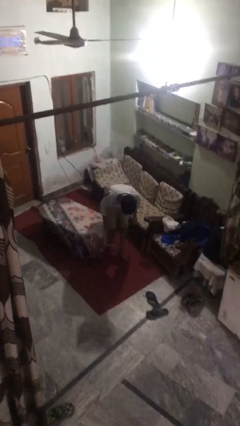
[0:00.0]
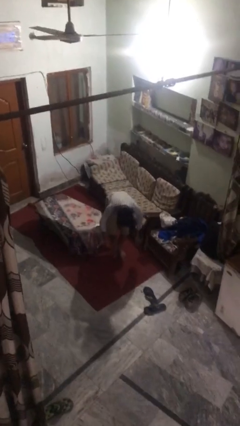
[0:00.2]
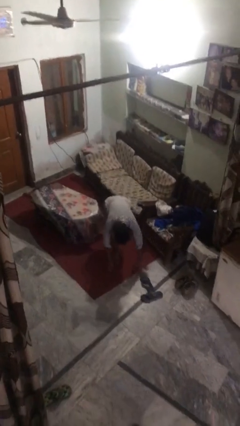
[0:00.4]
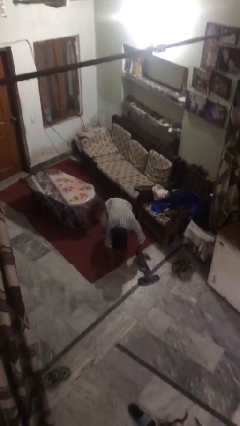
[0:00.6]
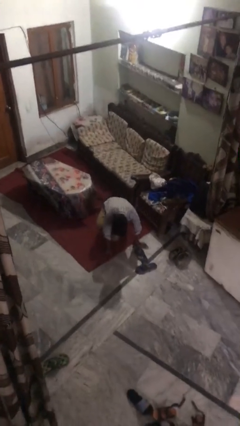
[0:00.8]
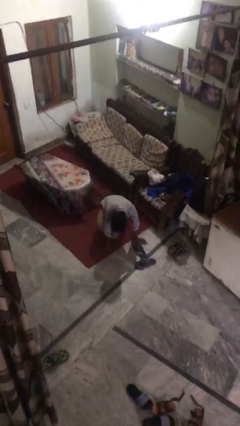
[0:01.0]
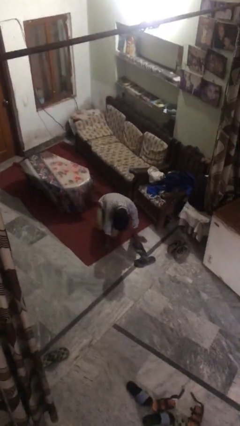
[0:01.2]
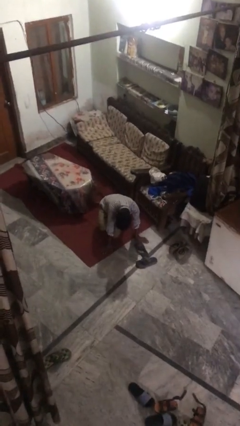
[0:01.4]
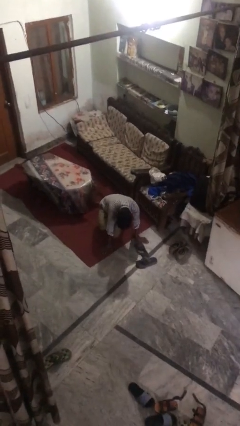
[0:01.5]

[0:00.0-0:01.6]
person lies down on floor

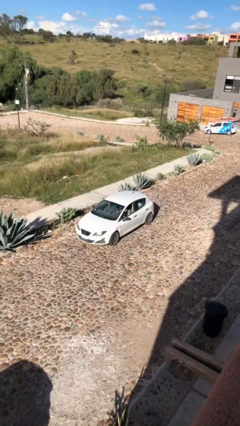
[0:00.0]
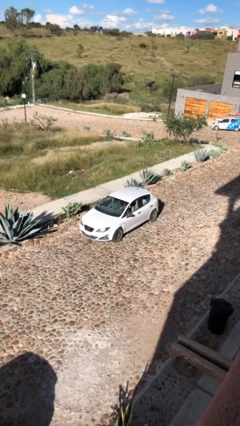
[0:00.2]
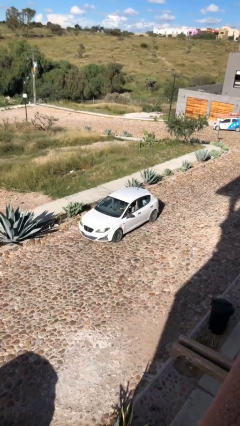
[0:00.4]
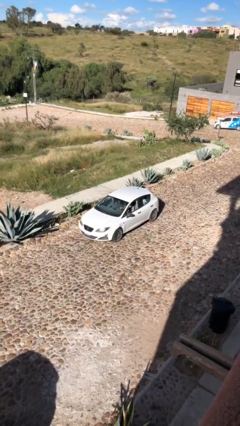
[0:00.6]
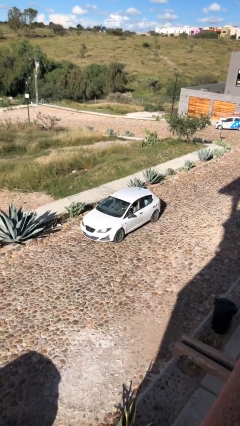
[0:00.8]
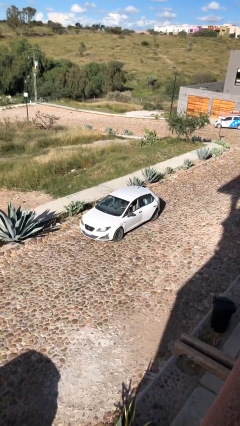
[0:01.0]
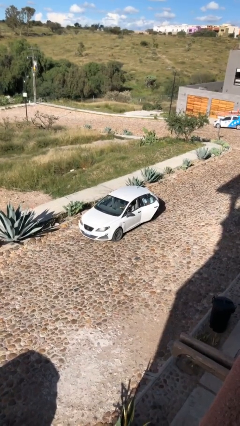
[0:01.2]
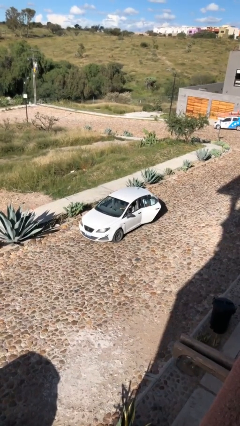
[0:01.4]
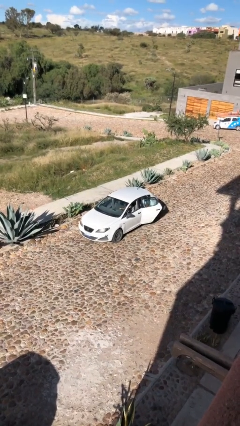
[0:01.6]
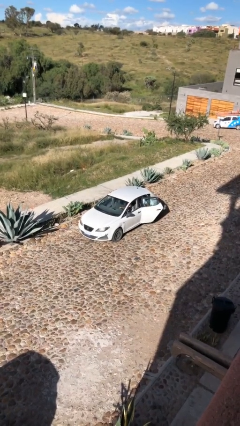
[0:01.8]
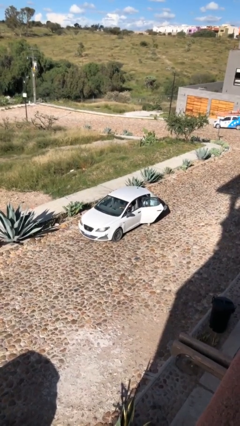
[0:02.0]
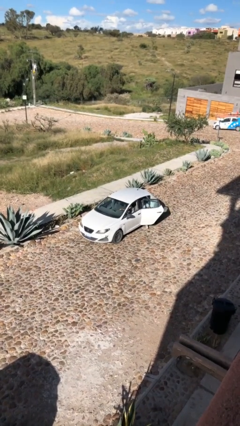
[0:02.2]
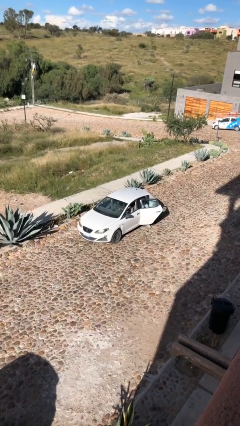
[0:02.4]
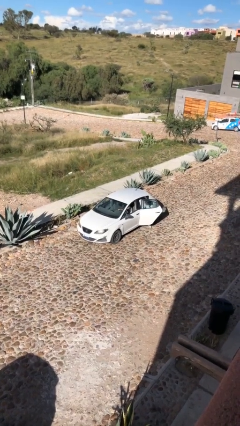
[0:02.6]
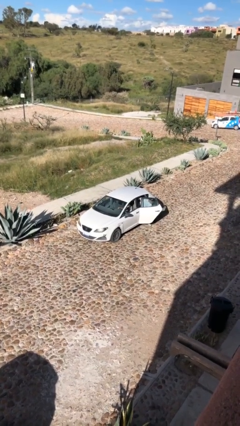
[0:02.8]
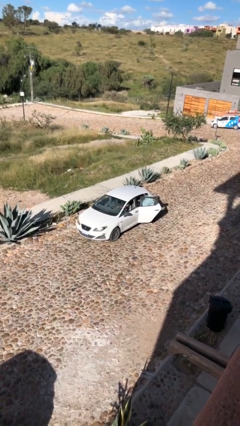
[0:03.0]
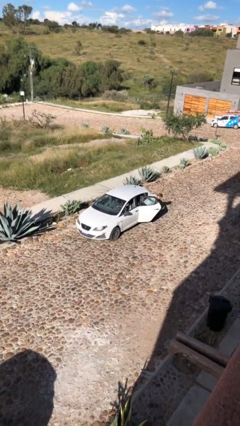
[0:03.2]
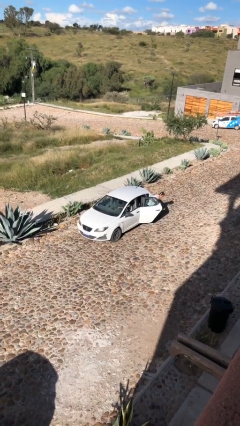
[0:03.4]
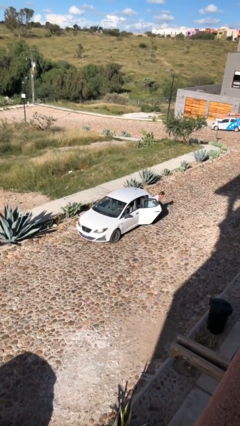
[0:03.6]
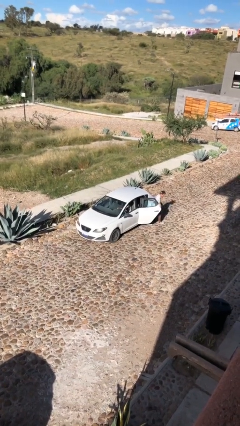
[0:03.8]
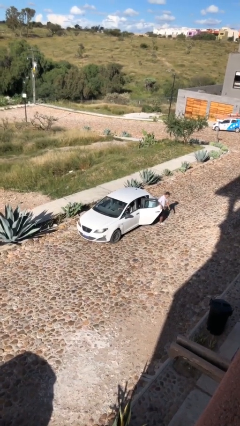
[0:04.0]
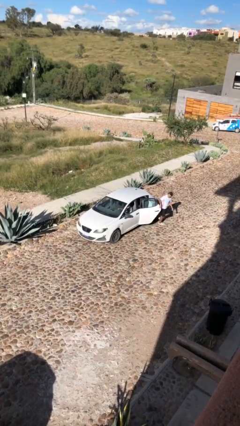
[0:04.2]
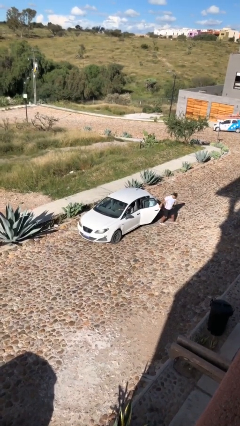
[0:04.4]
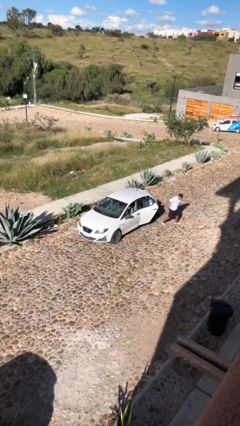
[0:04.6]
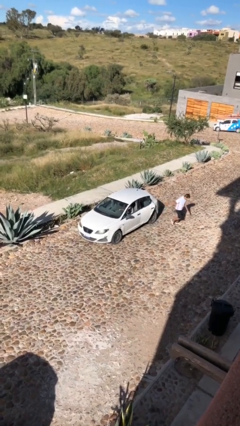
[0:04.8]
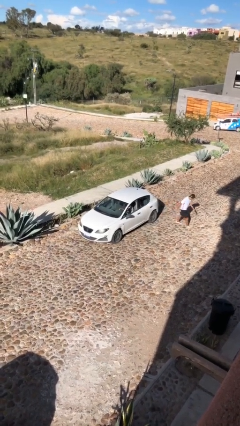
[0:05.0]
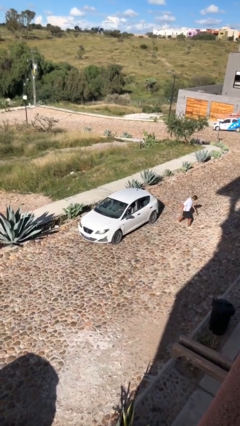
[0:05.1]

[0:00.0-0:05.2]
car drops off person

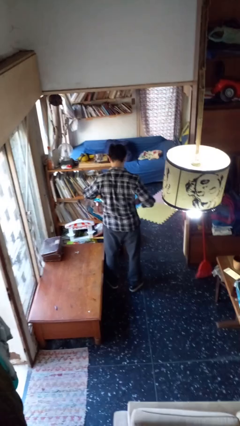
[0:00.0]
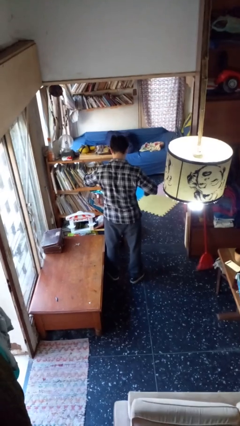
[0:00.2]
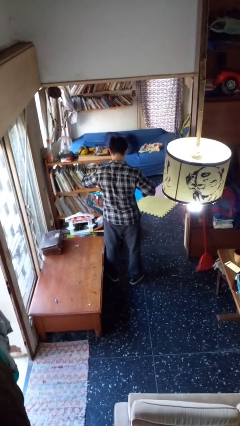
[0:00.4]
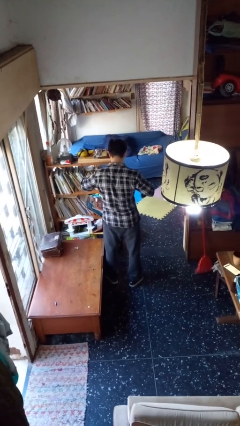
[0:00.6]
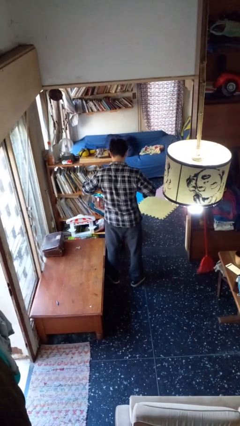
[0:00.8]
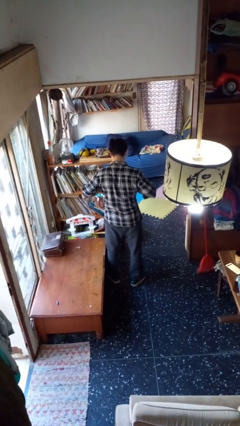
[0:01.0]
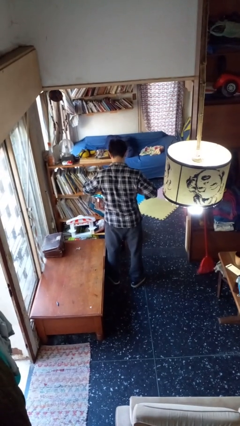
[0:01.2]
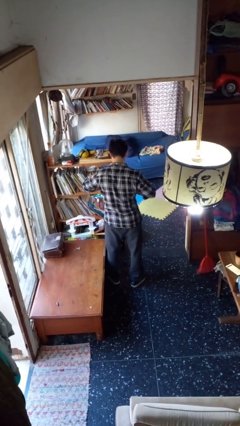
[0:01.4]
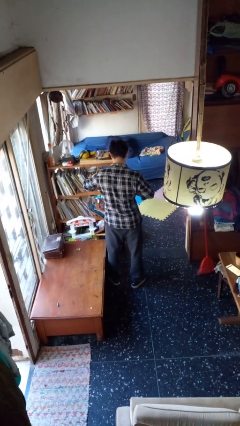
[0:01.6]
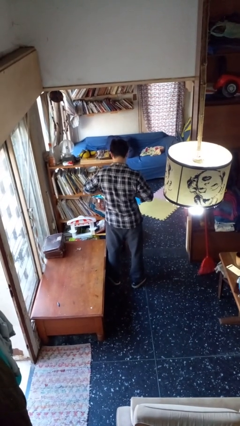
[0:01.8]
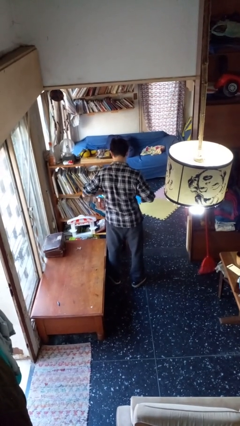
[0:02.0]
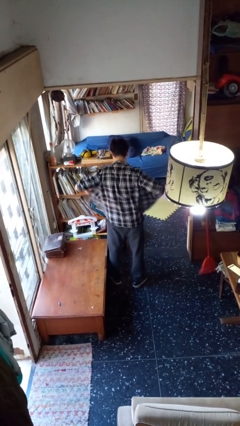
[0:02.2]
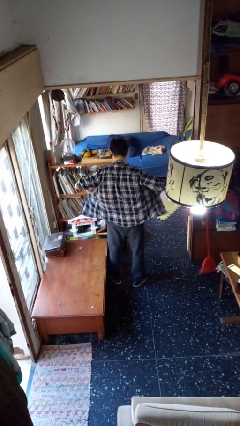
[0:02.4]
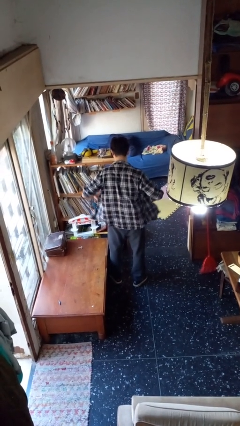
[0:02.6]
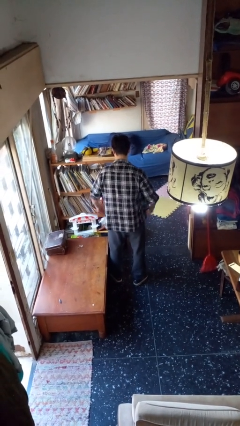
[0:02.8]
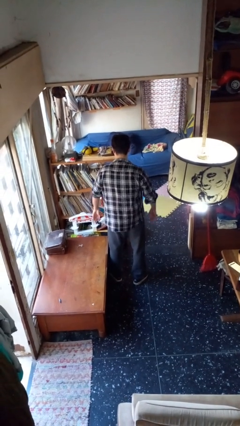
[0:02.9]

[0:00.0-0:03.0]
person unbuttons shirt

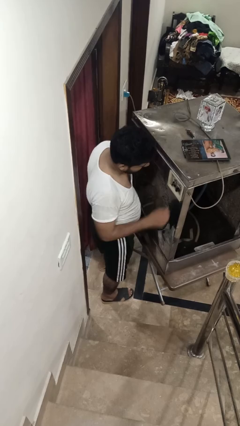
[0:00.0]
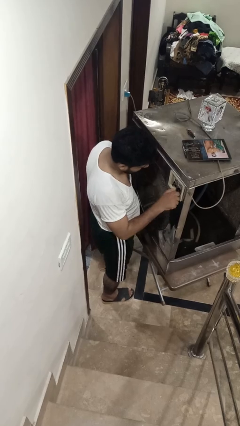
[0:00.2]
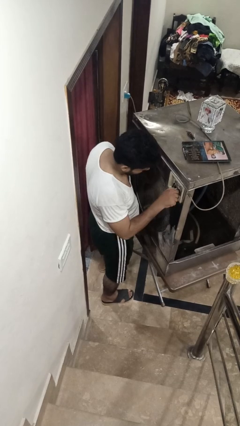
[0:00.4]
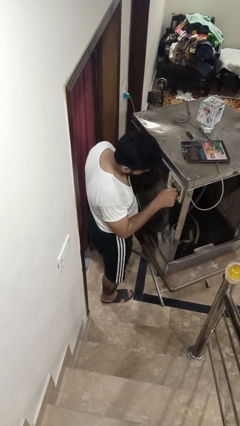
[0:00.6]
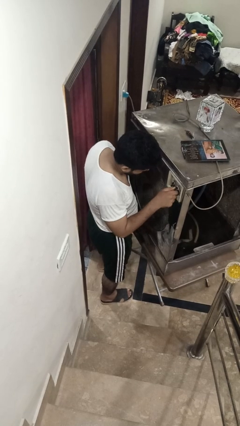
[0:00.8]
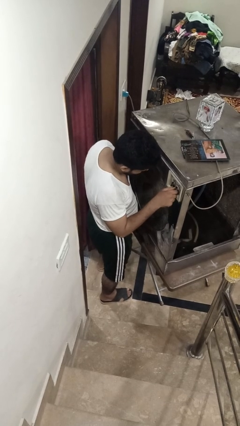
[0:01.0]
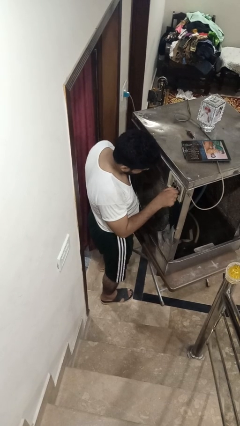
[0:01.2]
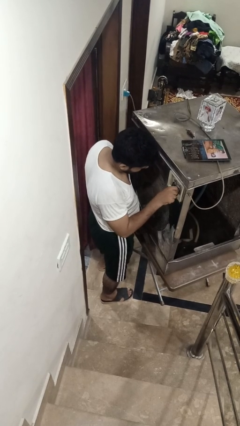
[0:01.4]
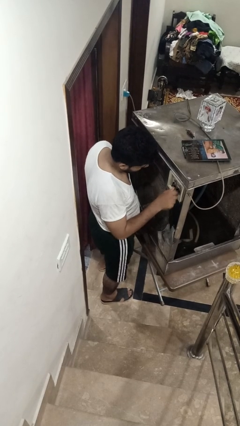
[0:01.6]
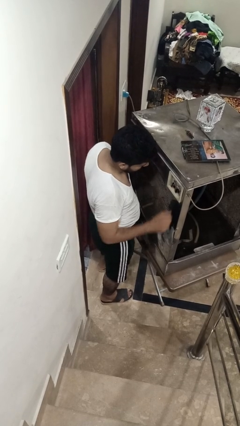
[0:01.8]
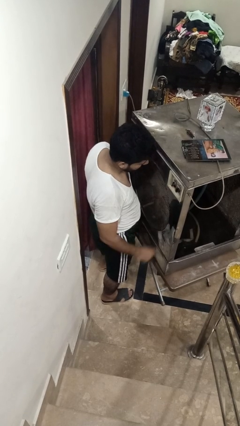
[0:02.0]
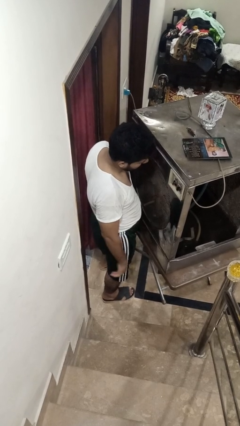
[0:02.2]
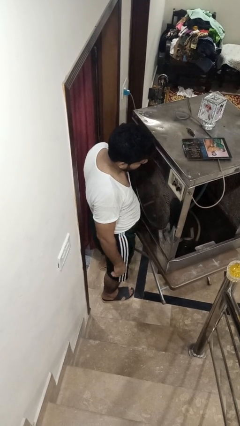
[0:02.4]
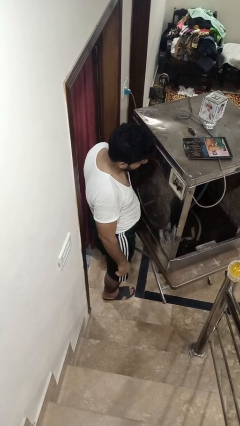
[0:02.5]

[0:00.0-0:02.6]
person adjusts thermostat

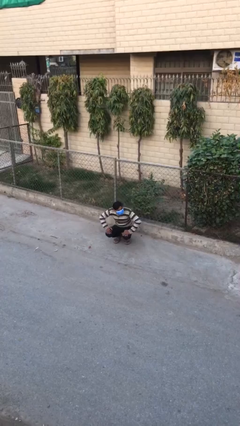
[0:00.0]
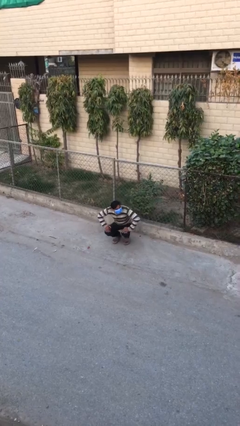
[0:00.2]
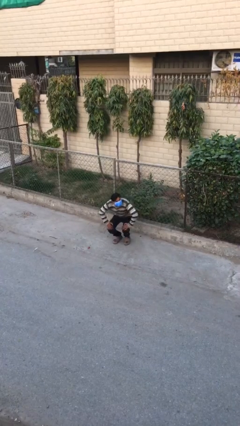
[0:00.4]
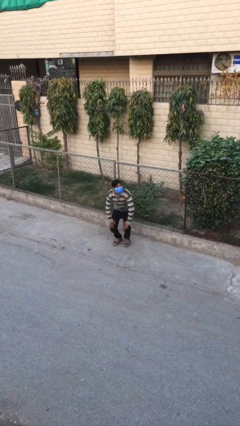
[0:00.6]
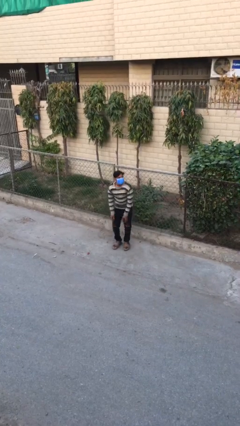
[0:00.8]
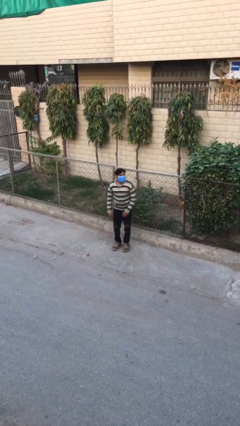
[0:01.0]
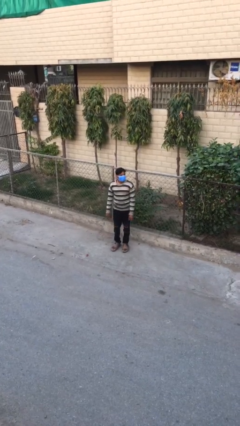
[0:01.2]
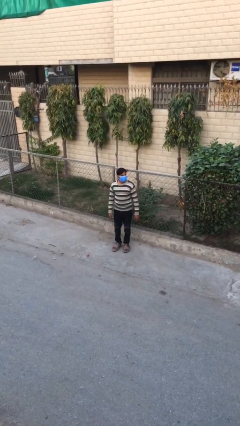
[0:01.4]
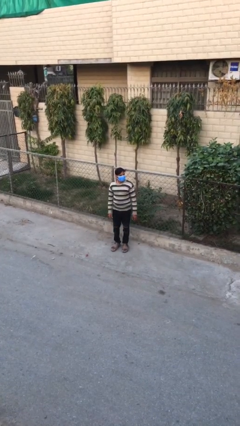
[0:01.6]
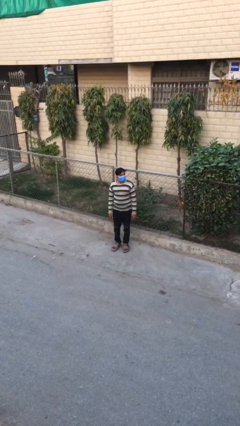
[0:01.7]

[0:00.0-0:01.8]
person stands up

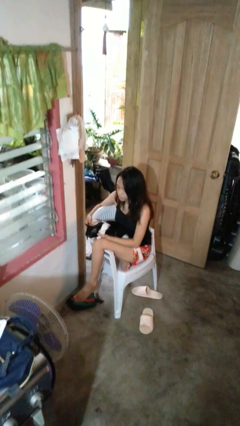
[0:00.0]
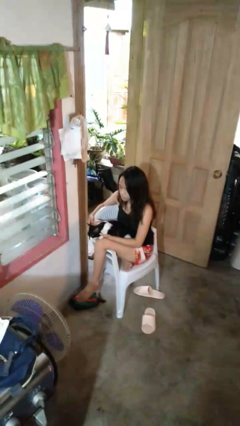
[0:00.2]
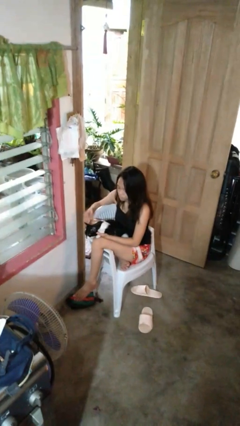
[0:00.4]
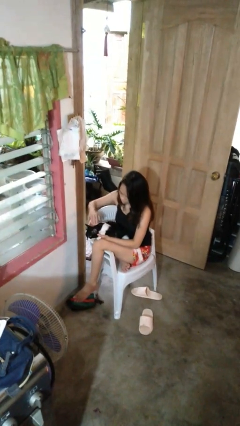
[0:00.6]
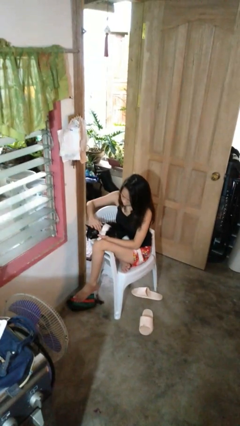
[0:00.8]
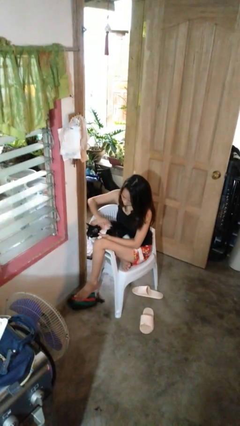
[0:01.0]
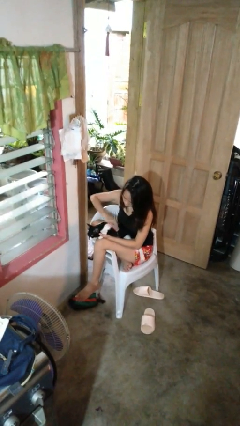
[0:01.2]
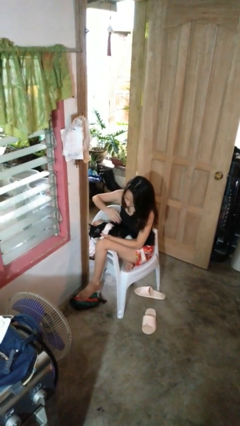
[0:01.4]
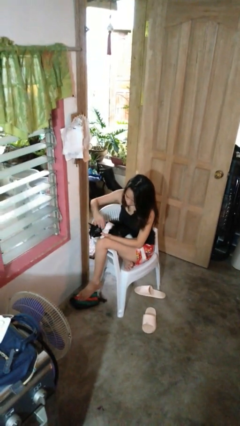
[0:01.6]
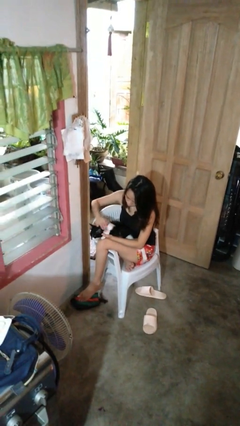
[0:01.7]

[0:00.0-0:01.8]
person pets cat

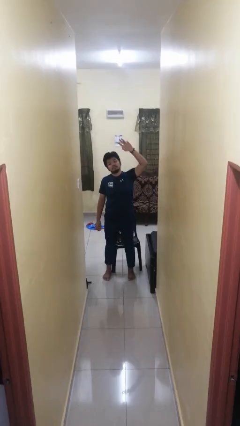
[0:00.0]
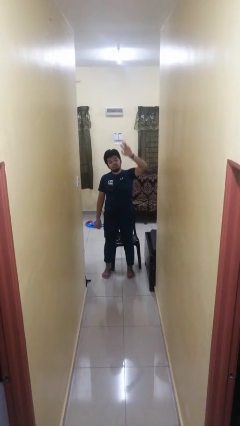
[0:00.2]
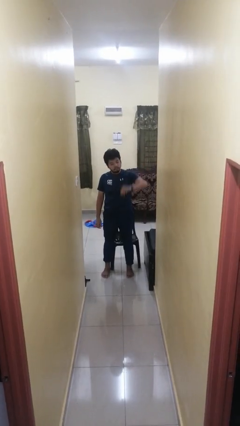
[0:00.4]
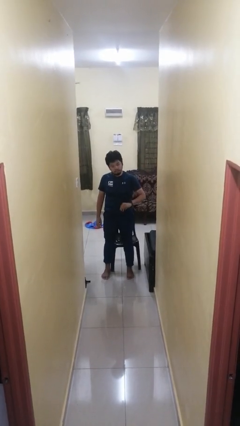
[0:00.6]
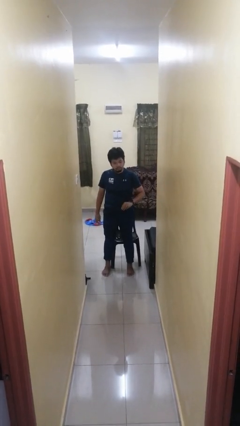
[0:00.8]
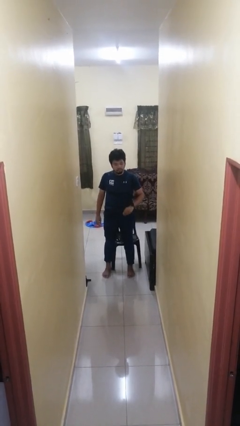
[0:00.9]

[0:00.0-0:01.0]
person gestures swipe down
